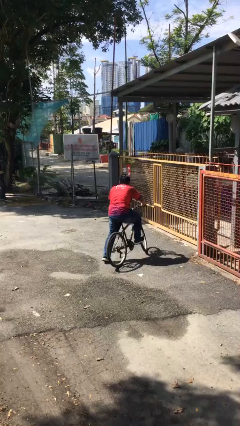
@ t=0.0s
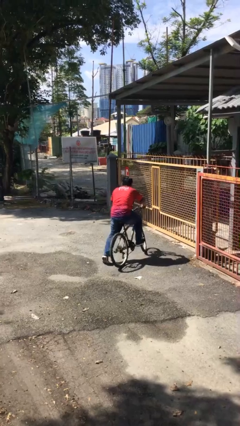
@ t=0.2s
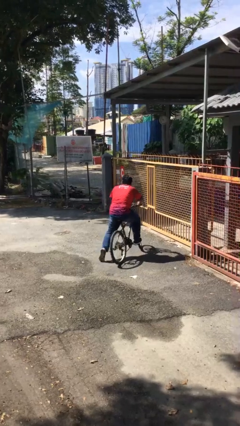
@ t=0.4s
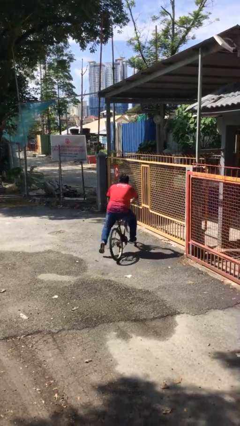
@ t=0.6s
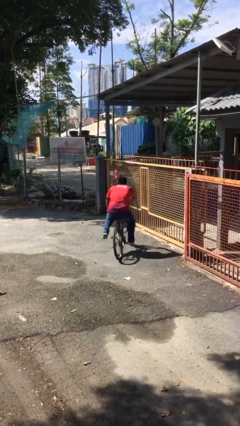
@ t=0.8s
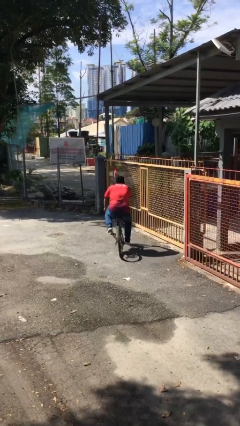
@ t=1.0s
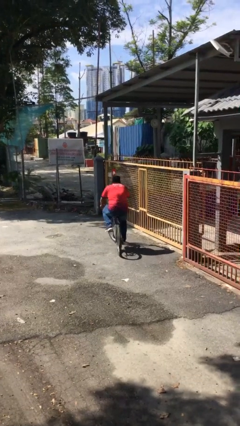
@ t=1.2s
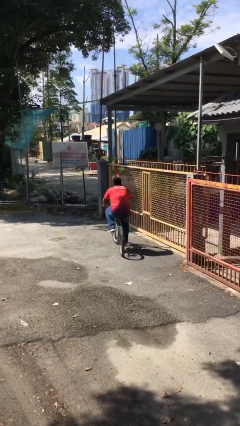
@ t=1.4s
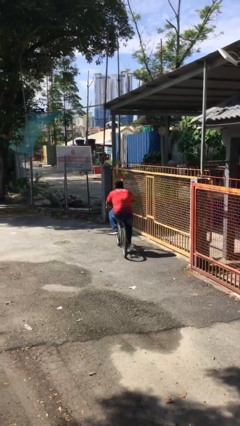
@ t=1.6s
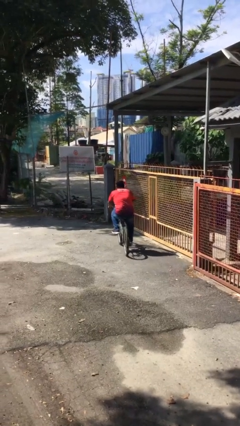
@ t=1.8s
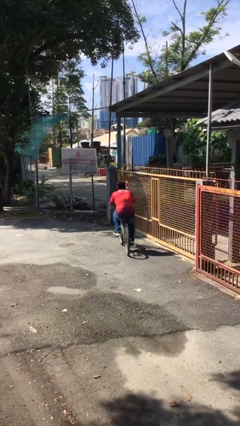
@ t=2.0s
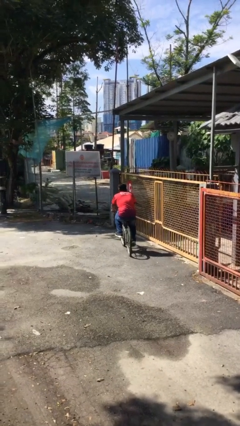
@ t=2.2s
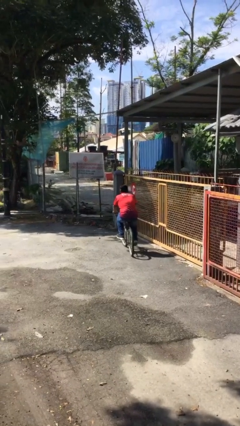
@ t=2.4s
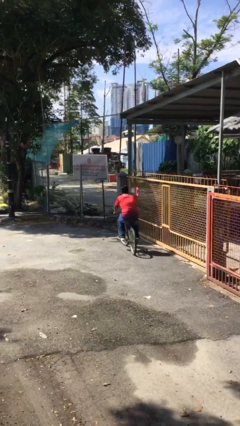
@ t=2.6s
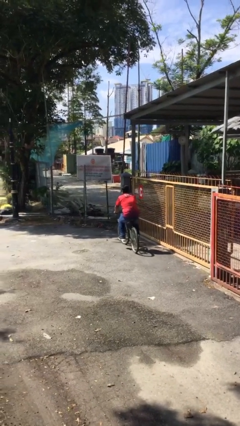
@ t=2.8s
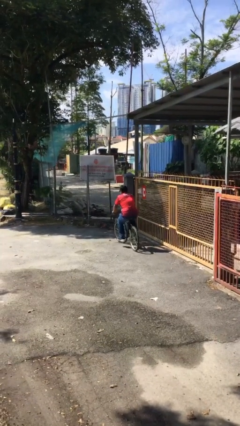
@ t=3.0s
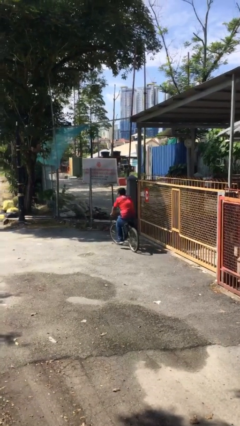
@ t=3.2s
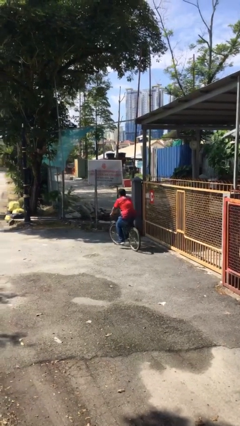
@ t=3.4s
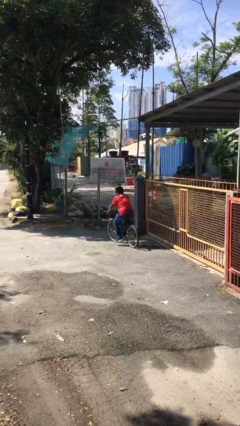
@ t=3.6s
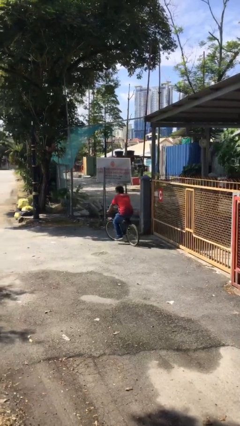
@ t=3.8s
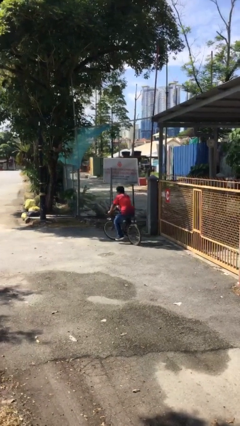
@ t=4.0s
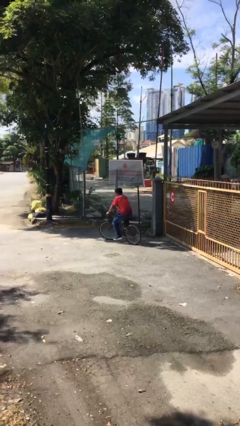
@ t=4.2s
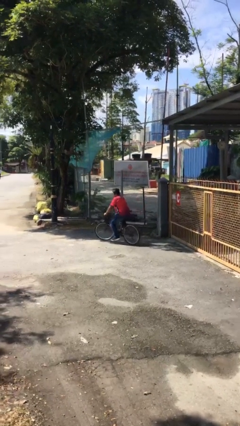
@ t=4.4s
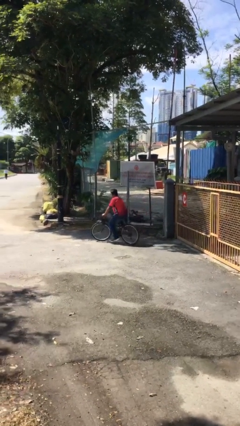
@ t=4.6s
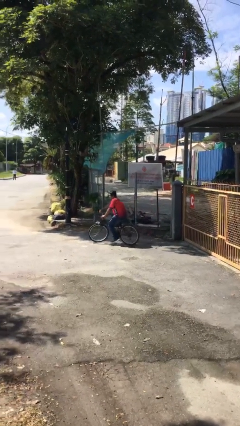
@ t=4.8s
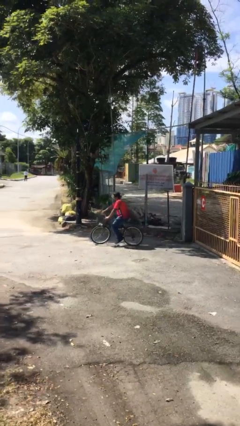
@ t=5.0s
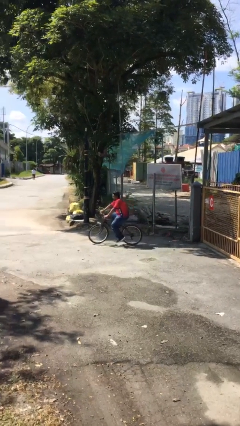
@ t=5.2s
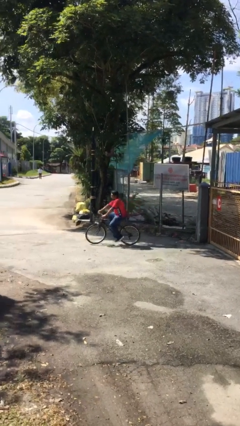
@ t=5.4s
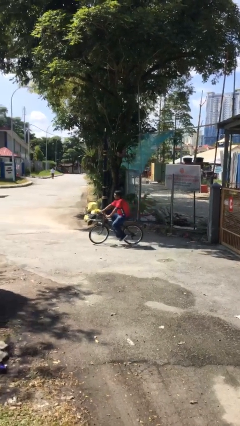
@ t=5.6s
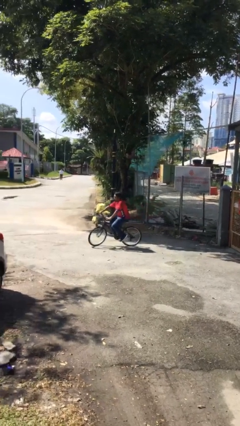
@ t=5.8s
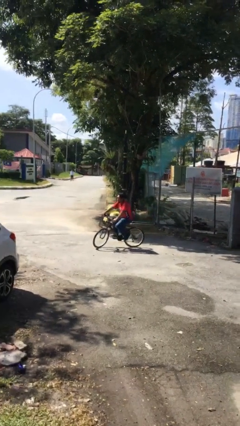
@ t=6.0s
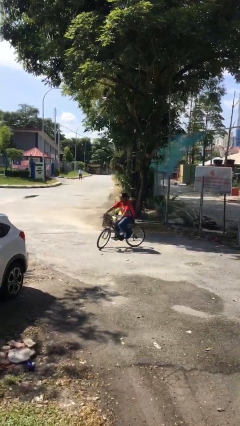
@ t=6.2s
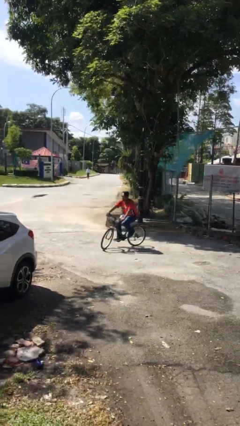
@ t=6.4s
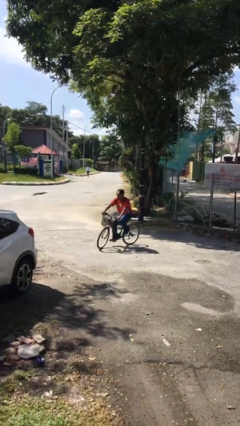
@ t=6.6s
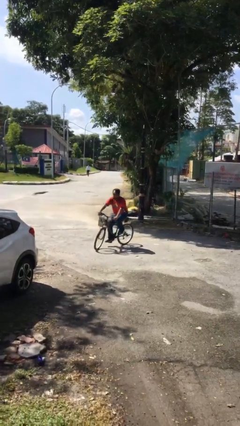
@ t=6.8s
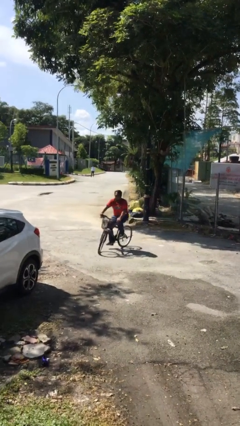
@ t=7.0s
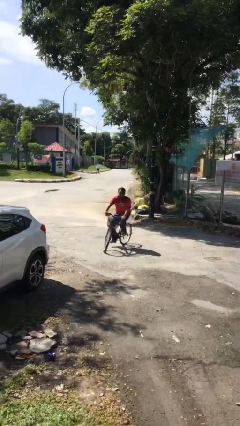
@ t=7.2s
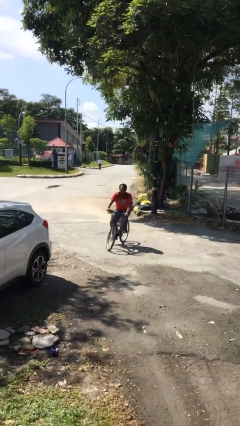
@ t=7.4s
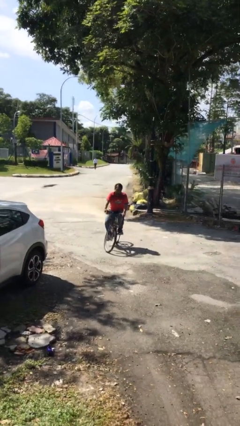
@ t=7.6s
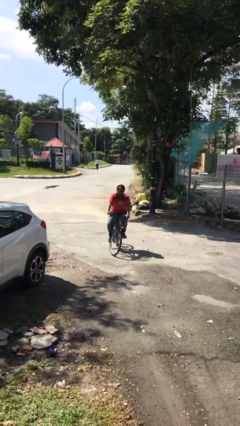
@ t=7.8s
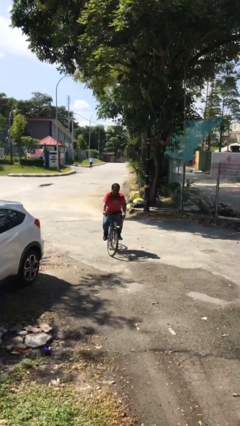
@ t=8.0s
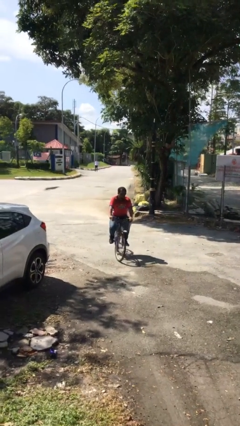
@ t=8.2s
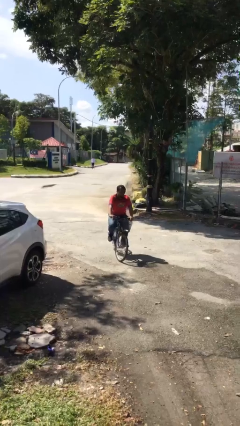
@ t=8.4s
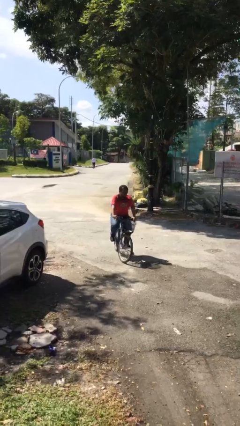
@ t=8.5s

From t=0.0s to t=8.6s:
person rides bicycle

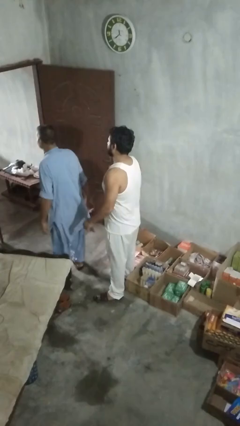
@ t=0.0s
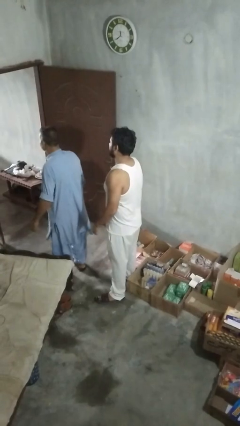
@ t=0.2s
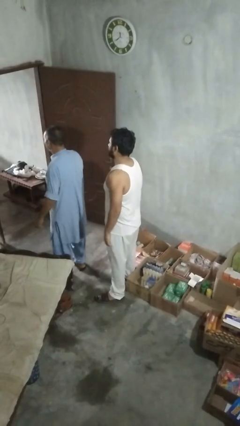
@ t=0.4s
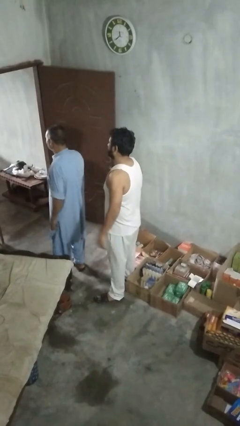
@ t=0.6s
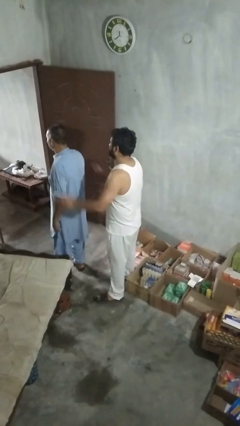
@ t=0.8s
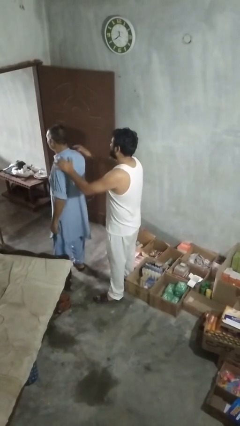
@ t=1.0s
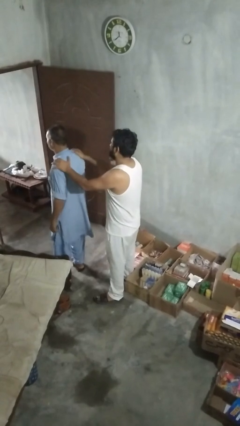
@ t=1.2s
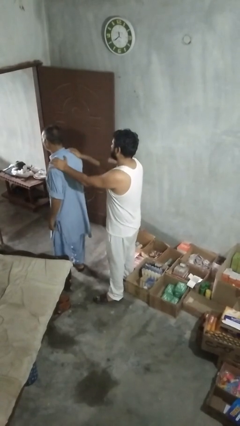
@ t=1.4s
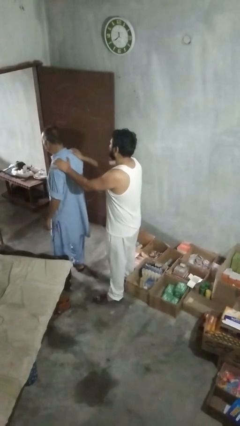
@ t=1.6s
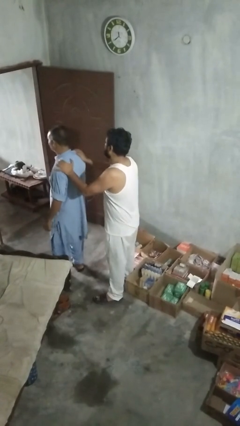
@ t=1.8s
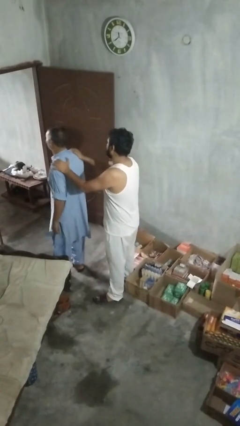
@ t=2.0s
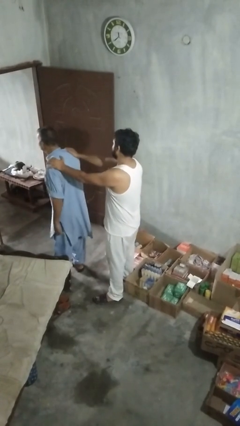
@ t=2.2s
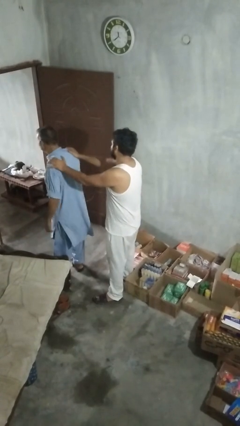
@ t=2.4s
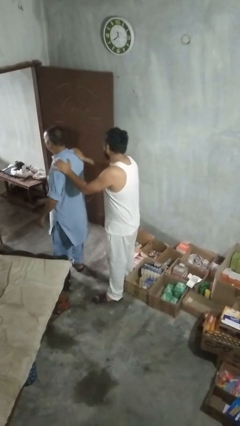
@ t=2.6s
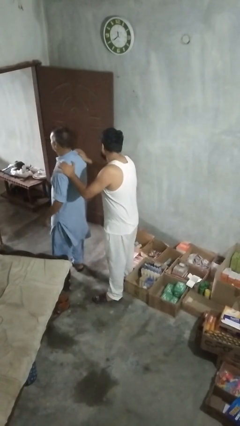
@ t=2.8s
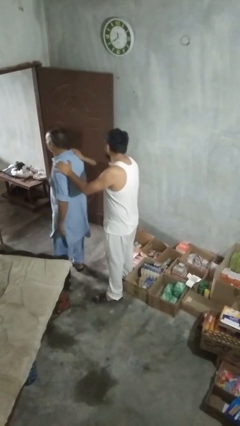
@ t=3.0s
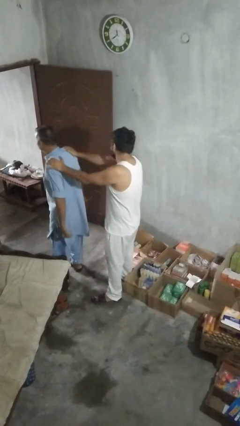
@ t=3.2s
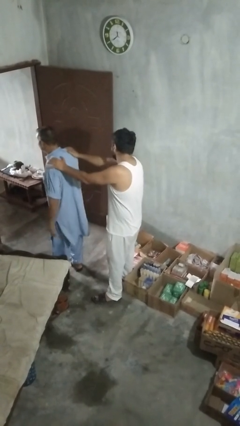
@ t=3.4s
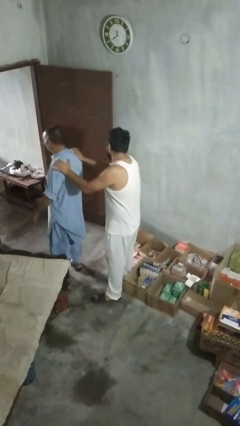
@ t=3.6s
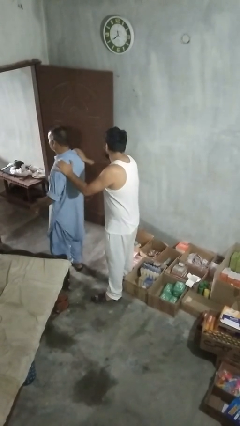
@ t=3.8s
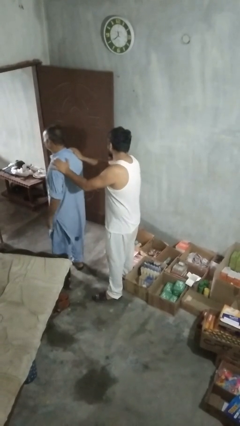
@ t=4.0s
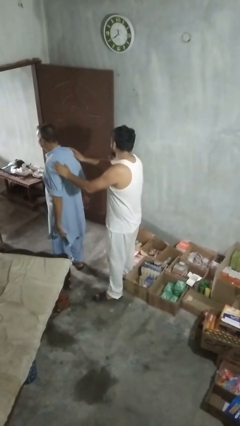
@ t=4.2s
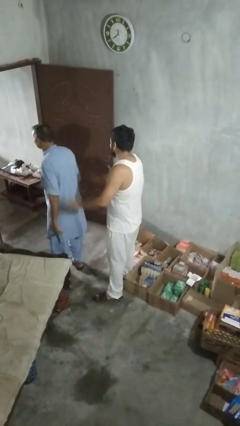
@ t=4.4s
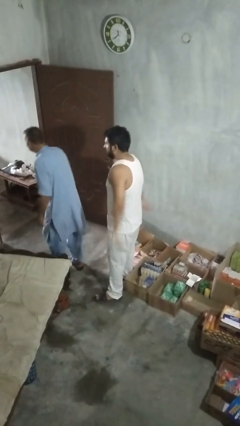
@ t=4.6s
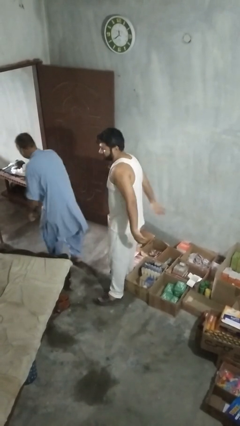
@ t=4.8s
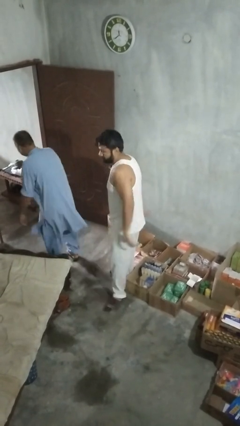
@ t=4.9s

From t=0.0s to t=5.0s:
person pounds shoulders of person

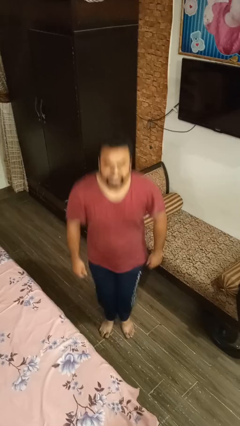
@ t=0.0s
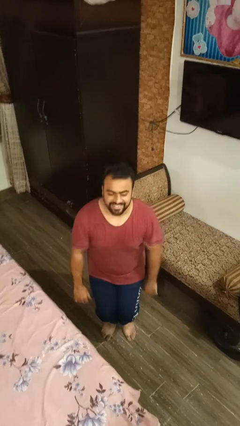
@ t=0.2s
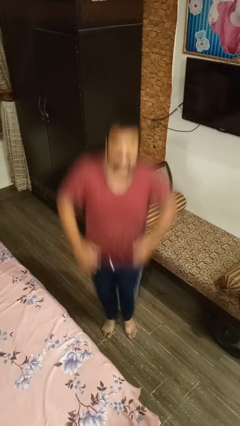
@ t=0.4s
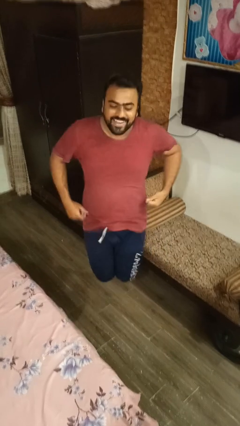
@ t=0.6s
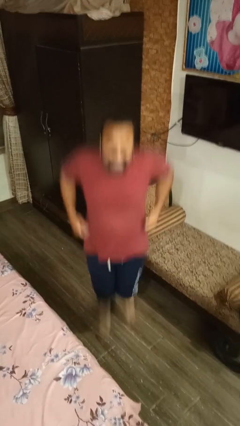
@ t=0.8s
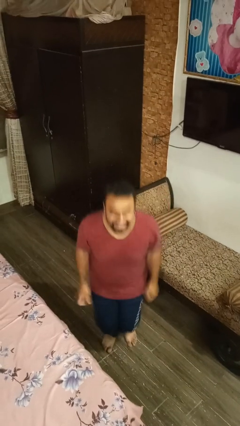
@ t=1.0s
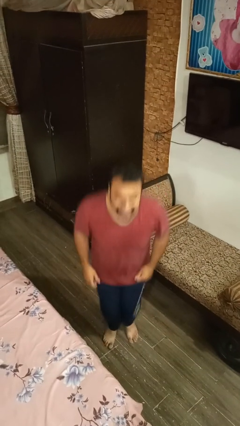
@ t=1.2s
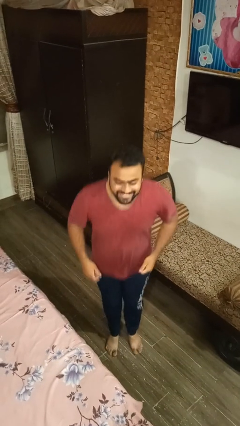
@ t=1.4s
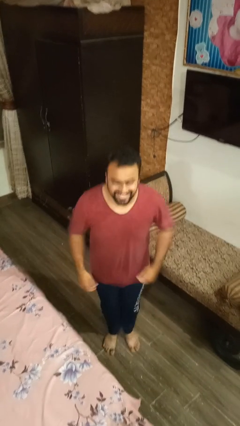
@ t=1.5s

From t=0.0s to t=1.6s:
person jumps

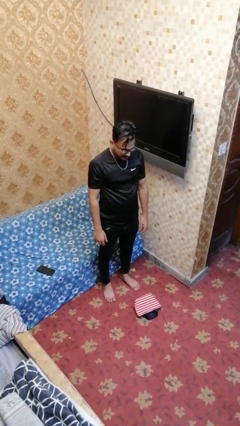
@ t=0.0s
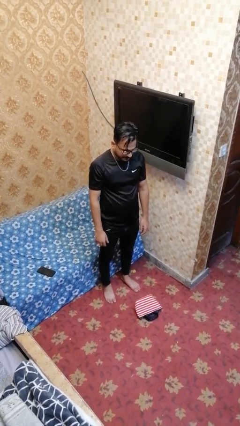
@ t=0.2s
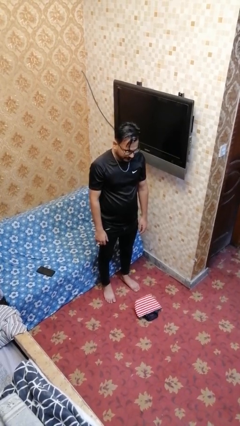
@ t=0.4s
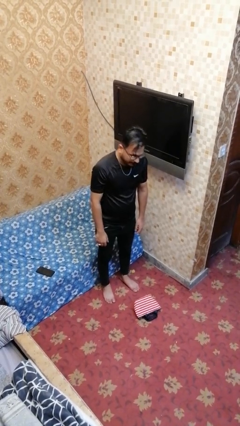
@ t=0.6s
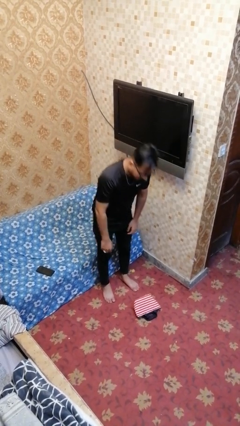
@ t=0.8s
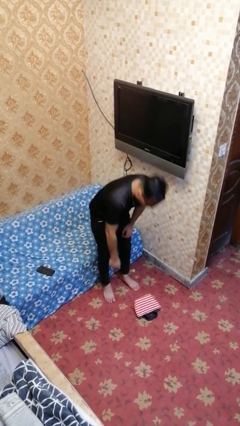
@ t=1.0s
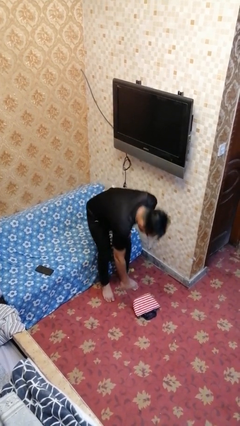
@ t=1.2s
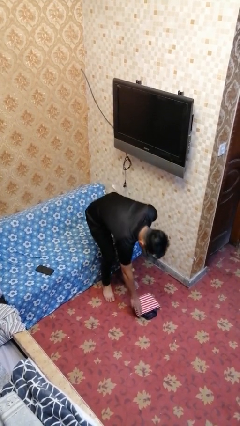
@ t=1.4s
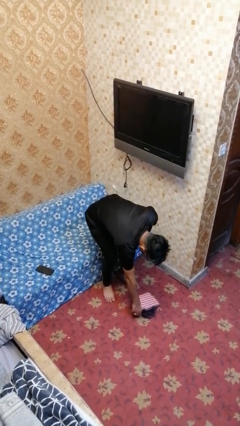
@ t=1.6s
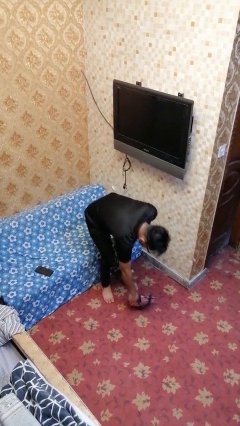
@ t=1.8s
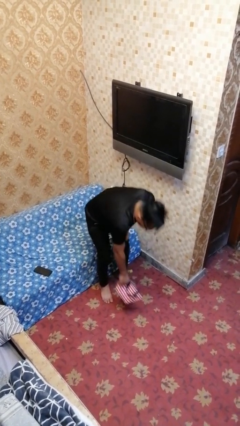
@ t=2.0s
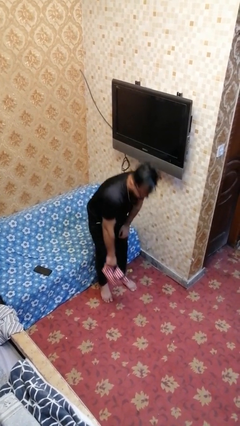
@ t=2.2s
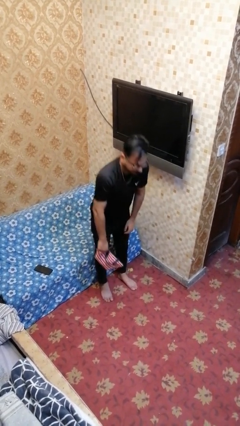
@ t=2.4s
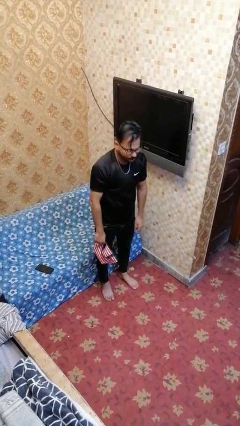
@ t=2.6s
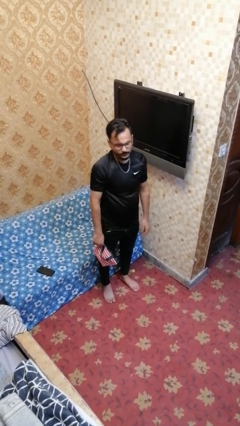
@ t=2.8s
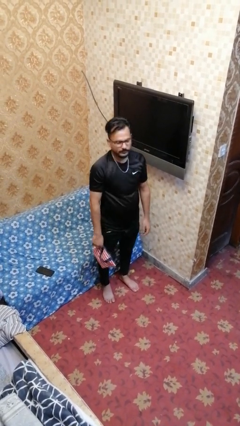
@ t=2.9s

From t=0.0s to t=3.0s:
person picks up object from floor
